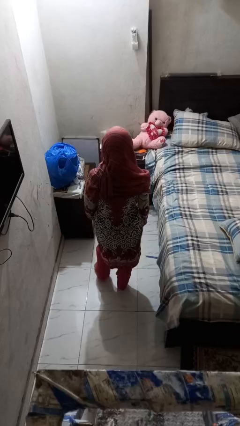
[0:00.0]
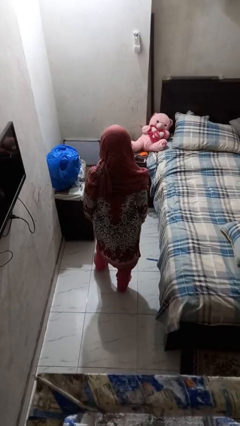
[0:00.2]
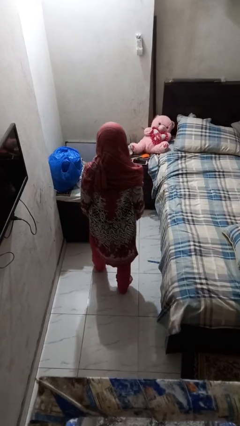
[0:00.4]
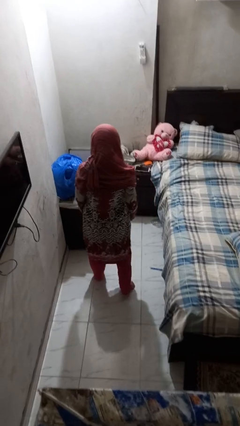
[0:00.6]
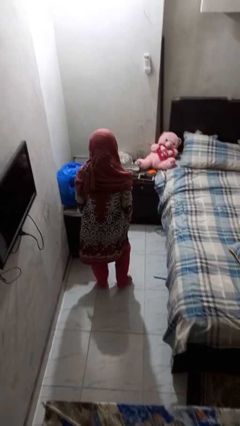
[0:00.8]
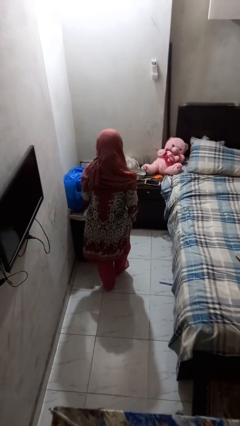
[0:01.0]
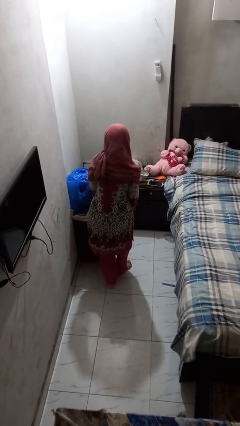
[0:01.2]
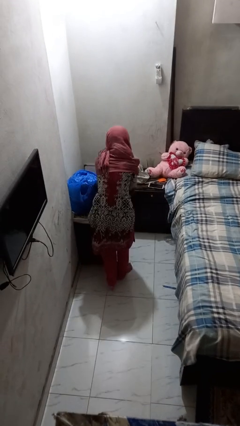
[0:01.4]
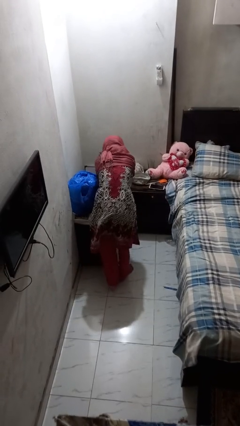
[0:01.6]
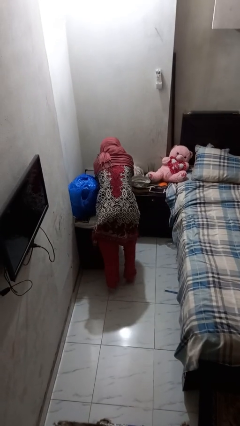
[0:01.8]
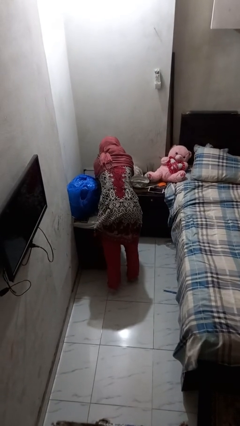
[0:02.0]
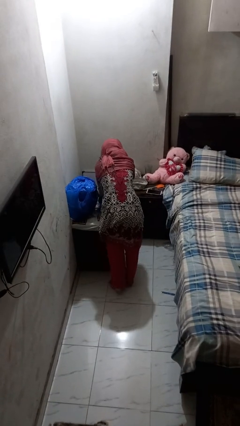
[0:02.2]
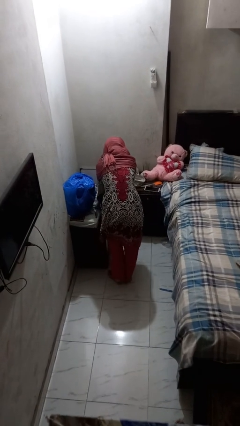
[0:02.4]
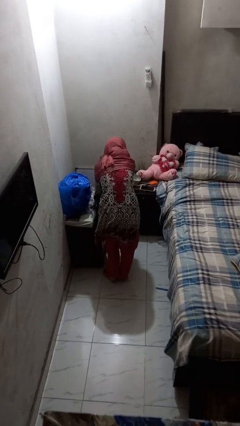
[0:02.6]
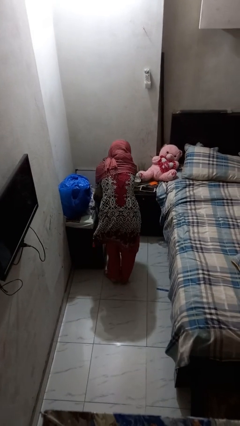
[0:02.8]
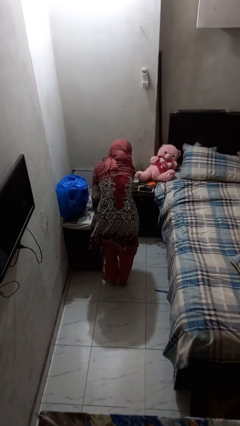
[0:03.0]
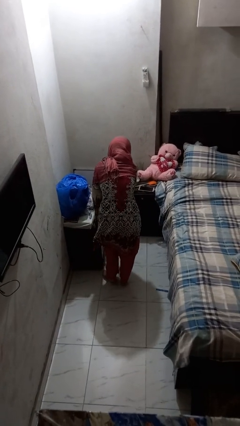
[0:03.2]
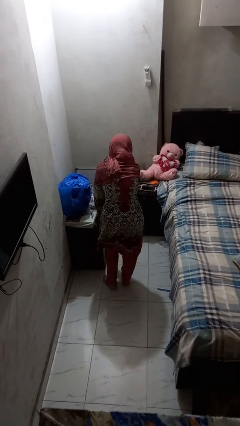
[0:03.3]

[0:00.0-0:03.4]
person bumps into table

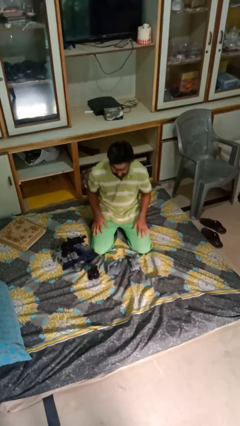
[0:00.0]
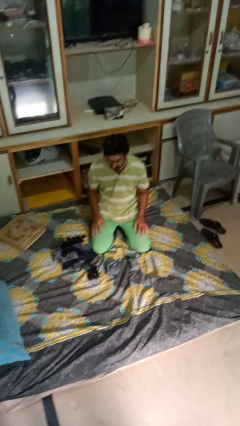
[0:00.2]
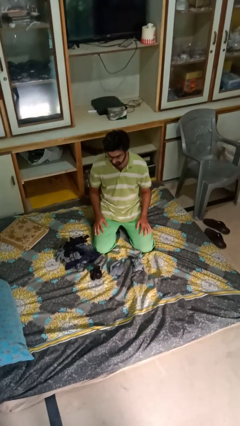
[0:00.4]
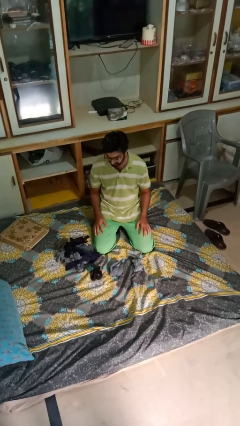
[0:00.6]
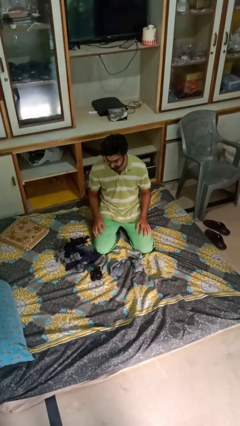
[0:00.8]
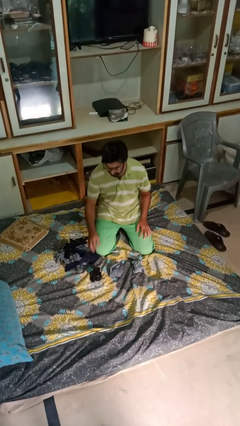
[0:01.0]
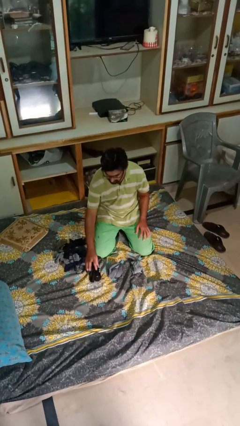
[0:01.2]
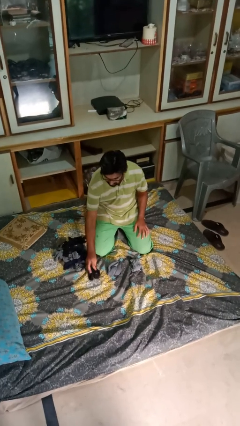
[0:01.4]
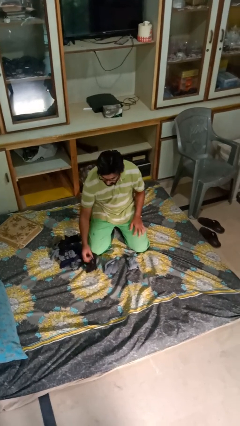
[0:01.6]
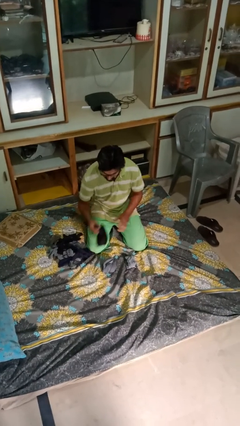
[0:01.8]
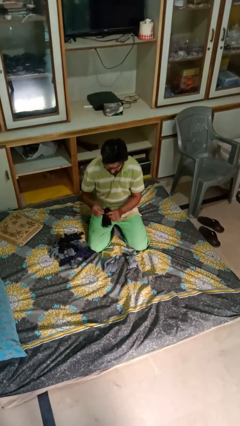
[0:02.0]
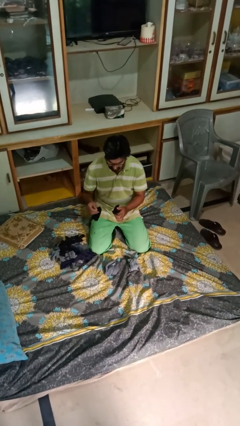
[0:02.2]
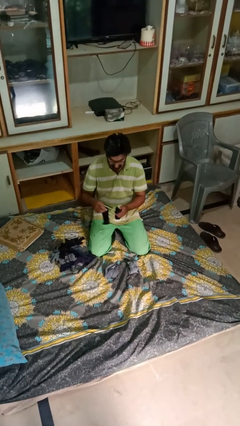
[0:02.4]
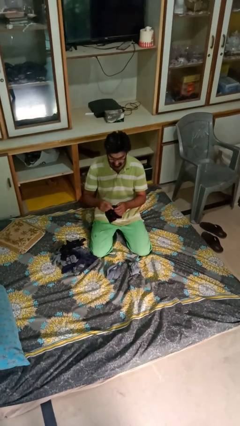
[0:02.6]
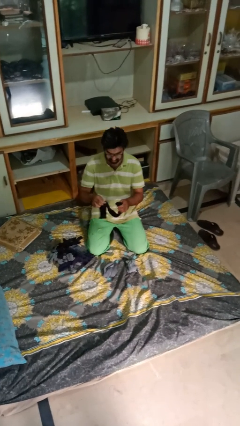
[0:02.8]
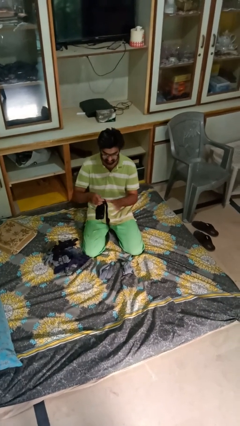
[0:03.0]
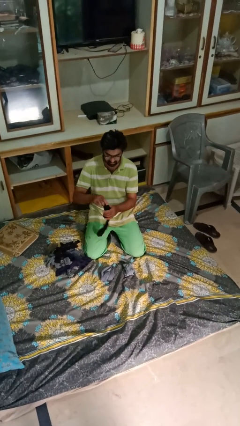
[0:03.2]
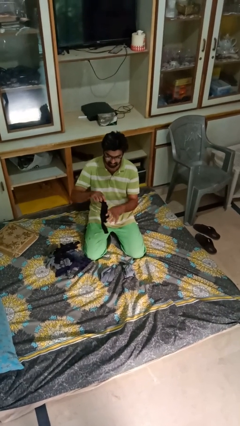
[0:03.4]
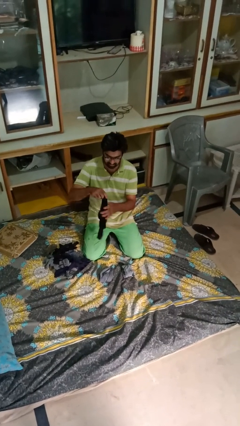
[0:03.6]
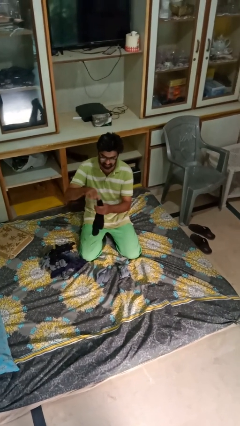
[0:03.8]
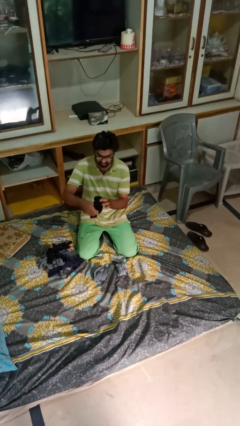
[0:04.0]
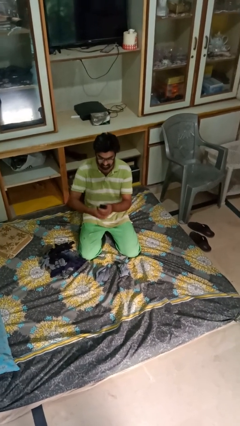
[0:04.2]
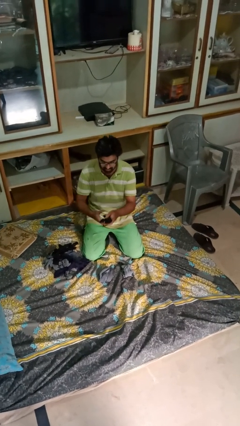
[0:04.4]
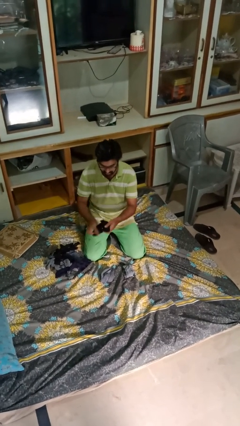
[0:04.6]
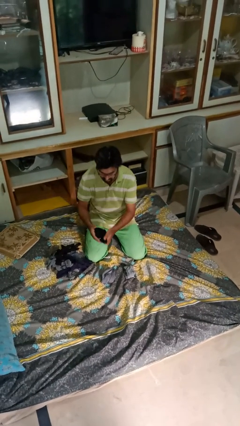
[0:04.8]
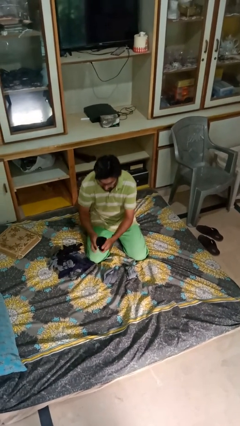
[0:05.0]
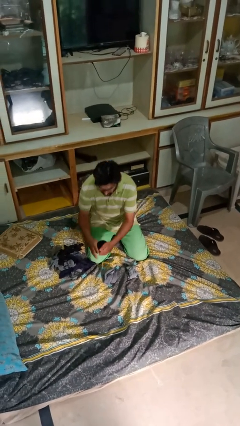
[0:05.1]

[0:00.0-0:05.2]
person folds socks

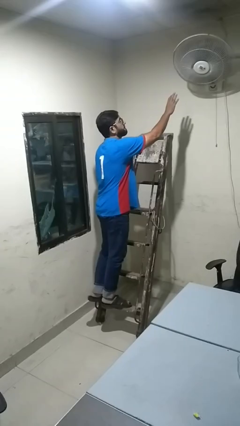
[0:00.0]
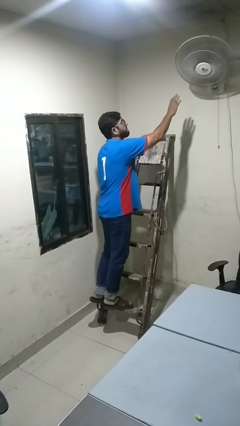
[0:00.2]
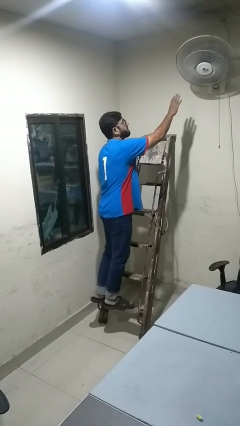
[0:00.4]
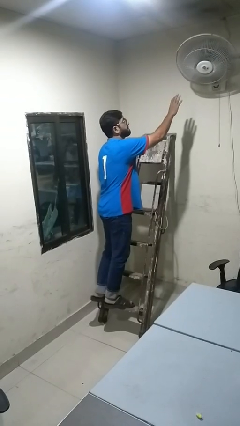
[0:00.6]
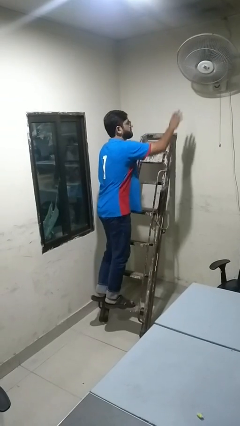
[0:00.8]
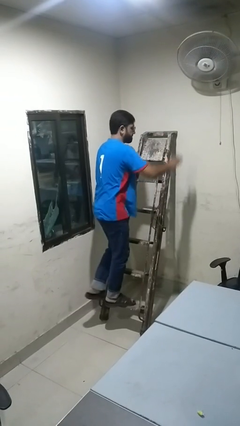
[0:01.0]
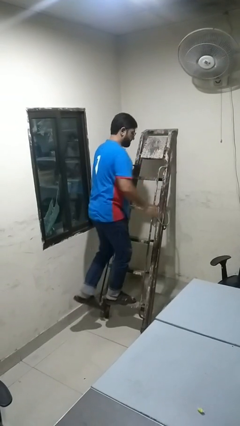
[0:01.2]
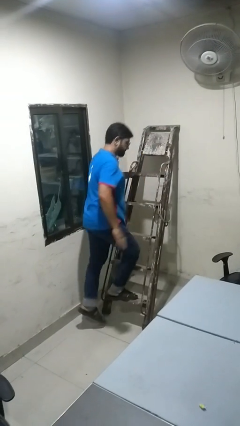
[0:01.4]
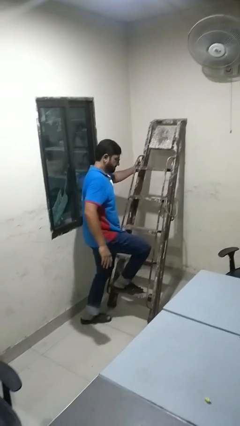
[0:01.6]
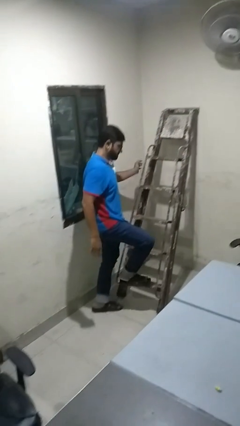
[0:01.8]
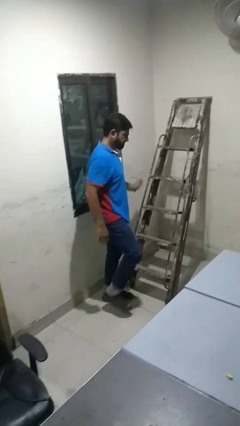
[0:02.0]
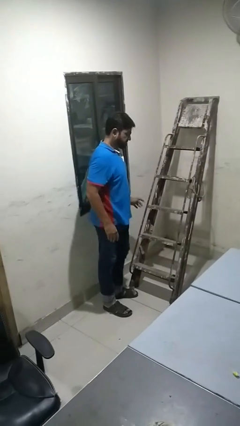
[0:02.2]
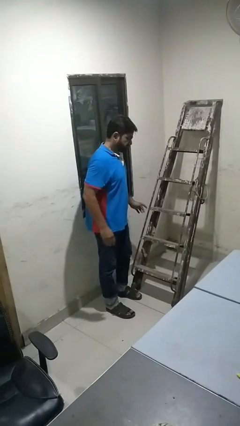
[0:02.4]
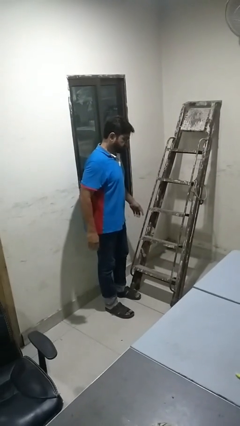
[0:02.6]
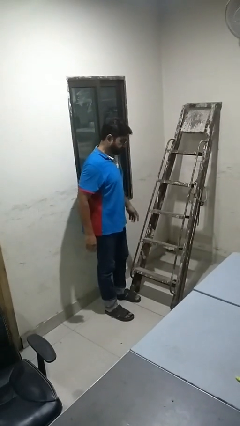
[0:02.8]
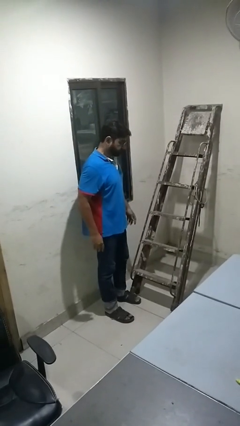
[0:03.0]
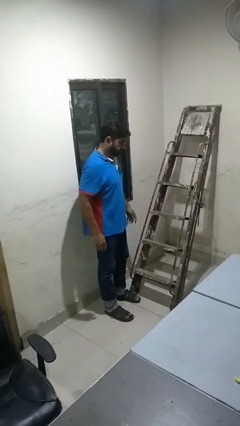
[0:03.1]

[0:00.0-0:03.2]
person climbs down ladder

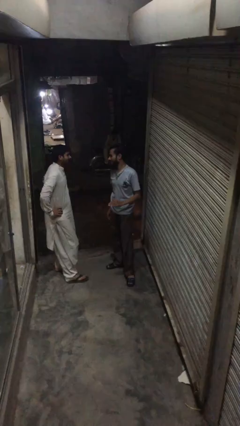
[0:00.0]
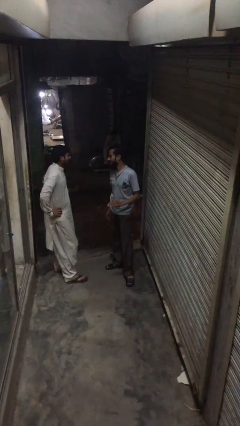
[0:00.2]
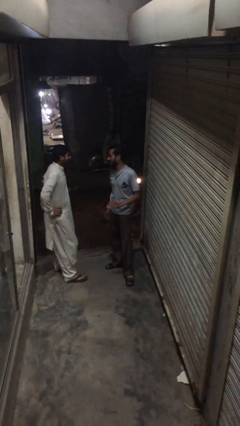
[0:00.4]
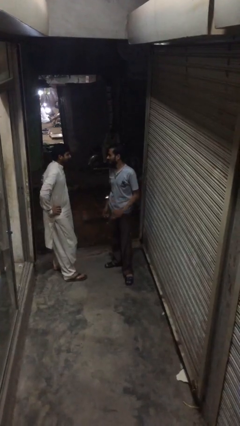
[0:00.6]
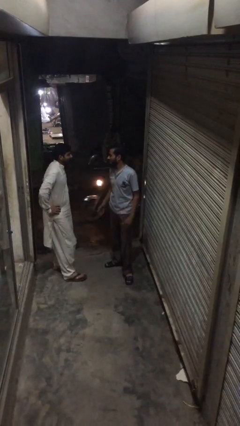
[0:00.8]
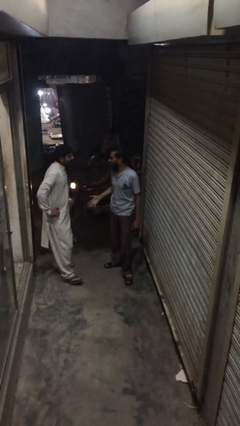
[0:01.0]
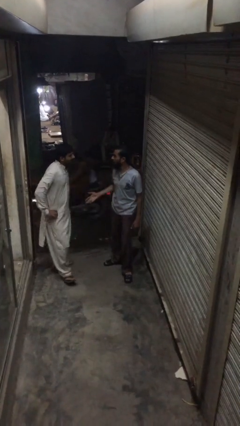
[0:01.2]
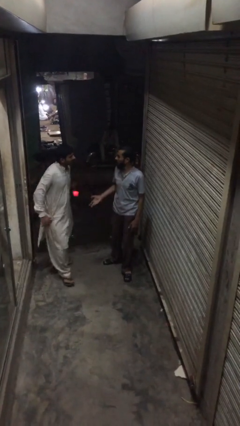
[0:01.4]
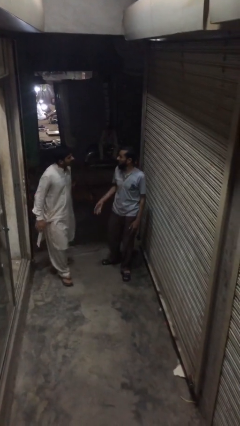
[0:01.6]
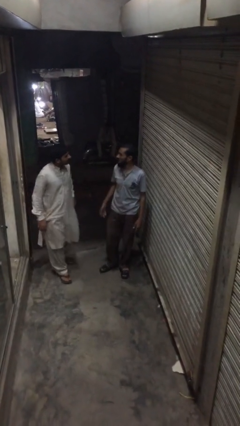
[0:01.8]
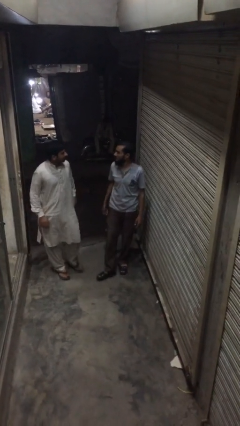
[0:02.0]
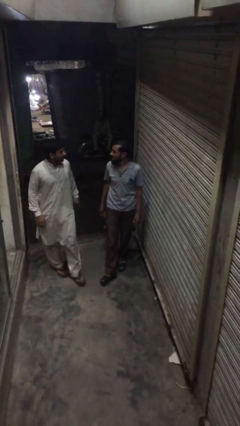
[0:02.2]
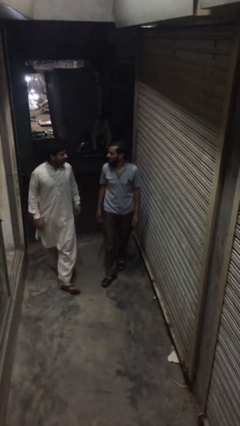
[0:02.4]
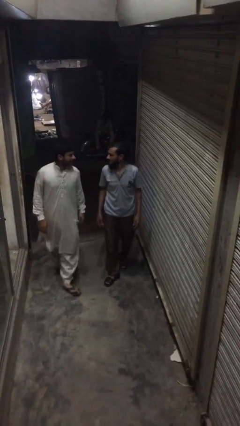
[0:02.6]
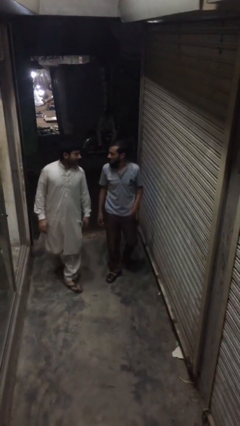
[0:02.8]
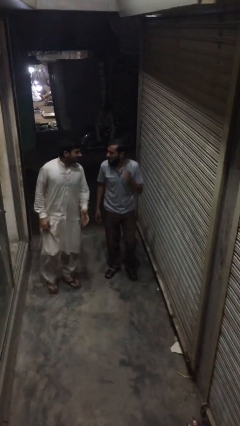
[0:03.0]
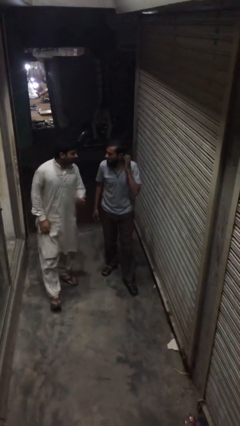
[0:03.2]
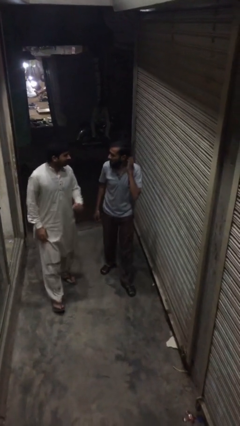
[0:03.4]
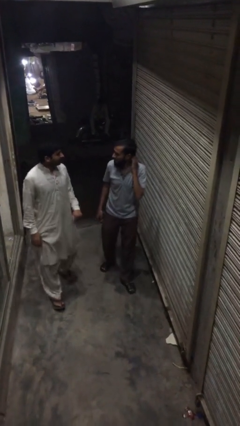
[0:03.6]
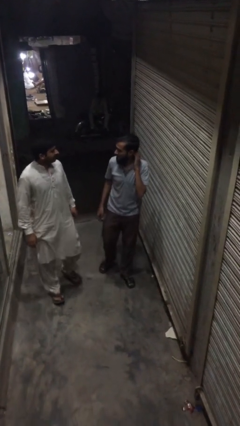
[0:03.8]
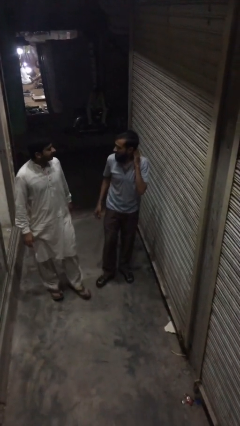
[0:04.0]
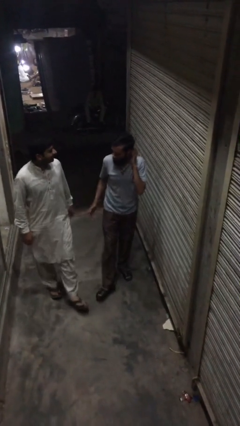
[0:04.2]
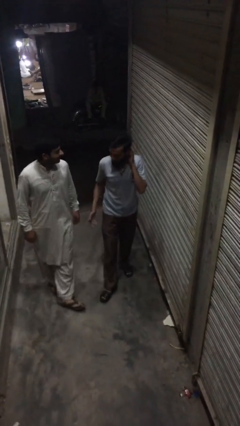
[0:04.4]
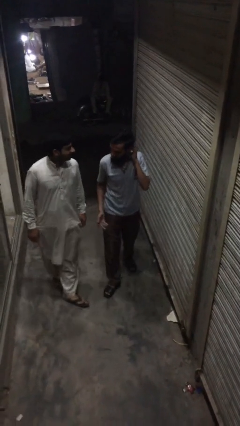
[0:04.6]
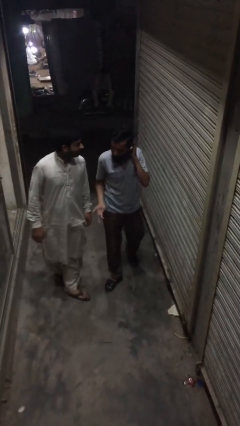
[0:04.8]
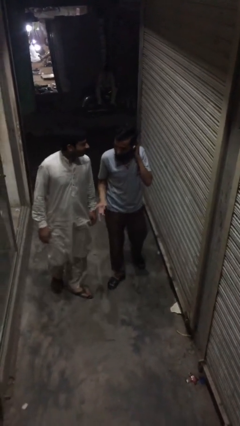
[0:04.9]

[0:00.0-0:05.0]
person talks to person

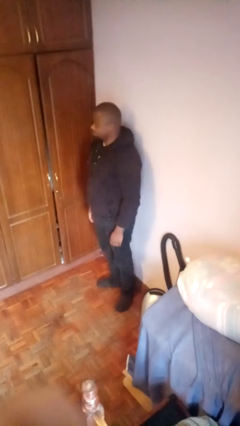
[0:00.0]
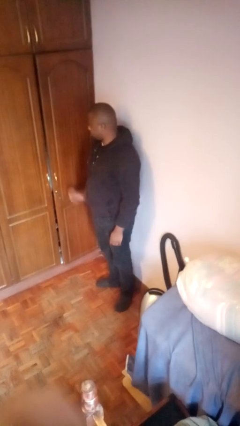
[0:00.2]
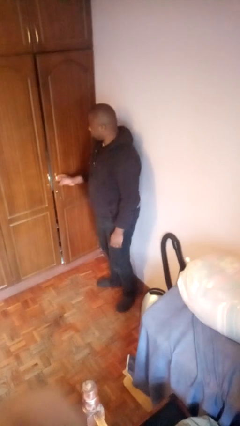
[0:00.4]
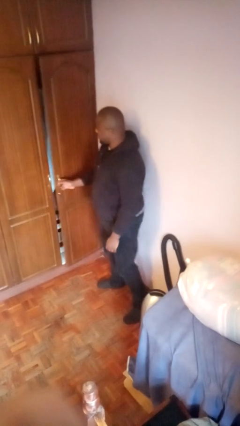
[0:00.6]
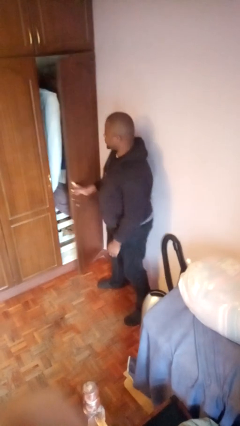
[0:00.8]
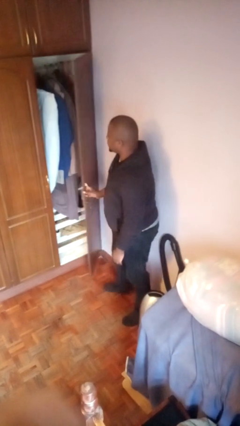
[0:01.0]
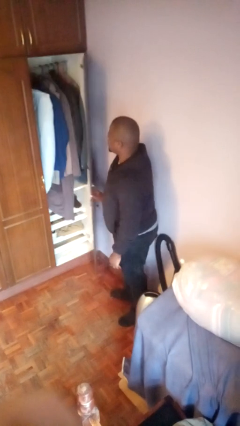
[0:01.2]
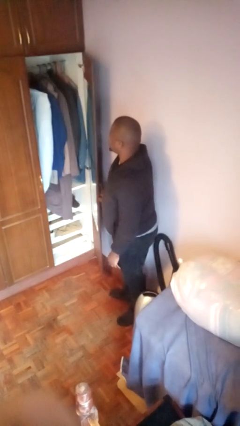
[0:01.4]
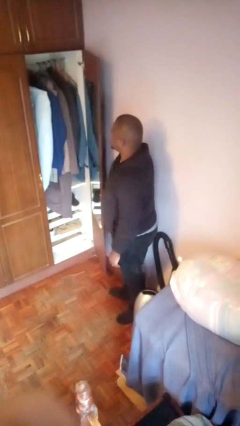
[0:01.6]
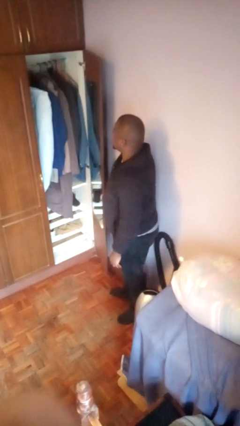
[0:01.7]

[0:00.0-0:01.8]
person opens closet door
